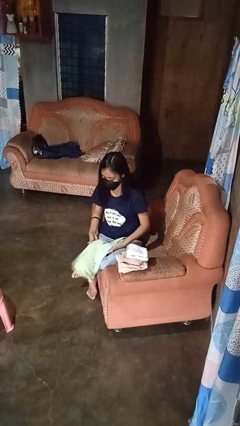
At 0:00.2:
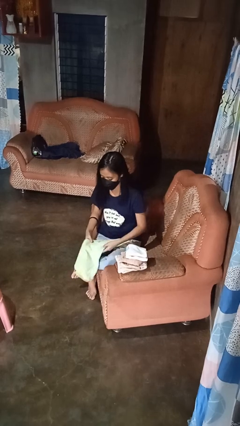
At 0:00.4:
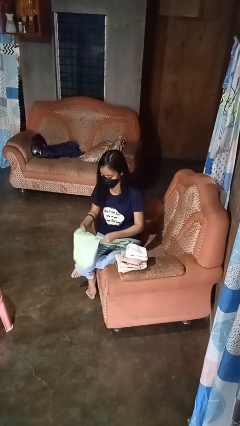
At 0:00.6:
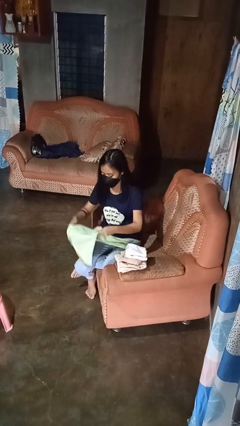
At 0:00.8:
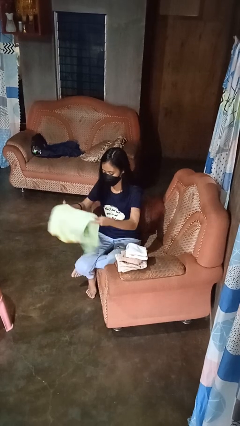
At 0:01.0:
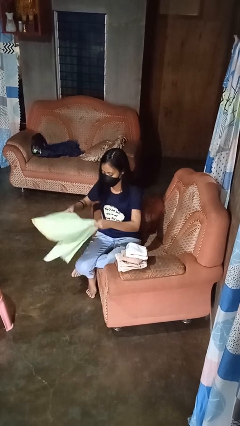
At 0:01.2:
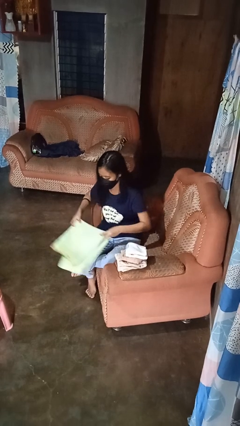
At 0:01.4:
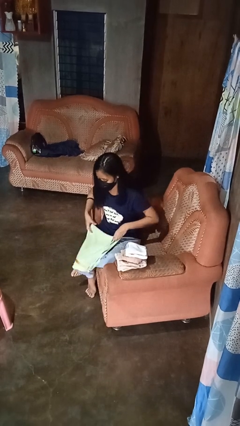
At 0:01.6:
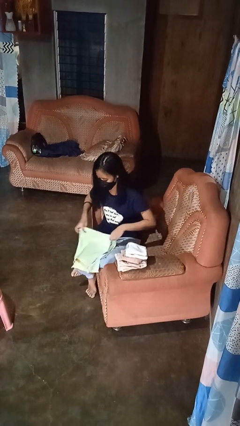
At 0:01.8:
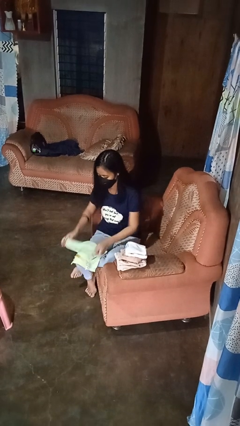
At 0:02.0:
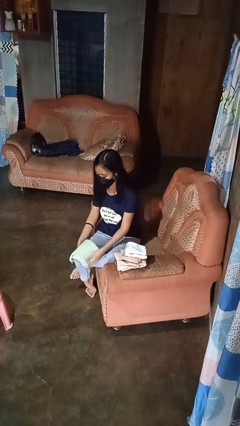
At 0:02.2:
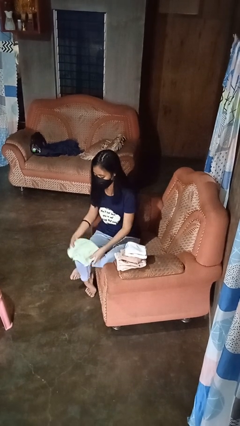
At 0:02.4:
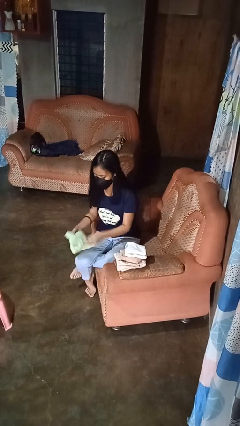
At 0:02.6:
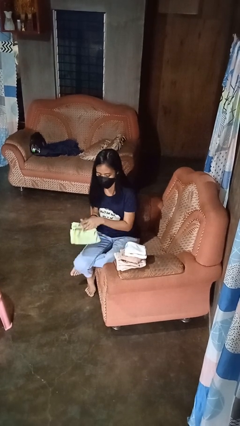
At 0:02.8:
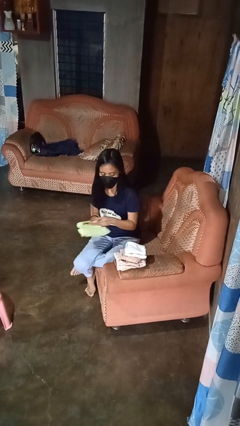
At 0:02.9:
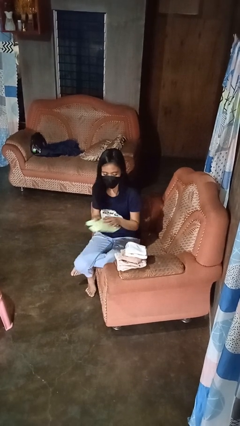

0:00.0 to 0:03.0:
person folds towel

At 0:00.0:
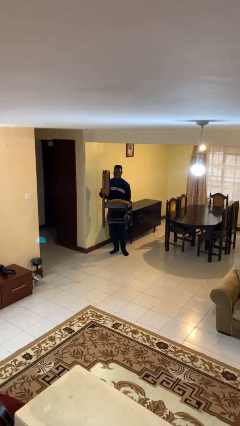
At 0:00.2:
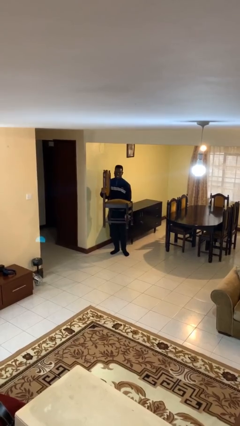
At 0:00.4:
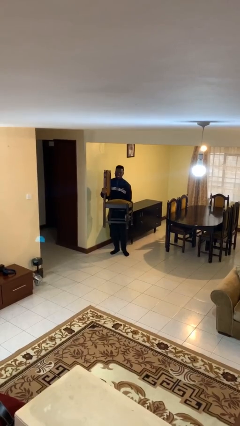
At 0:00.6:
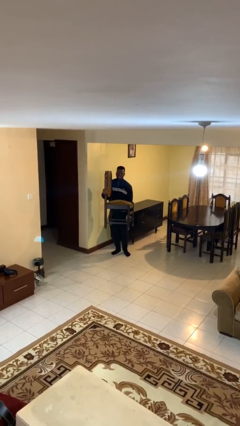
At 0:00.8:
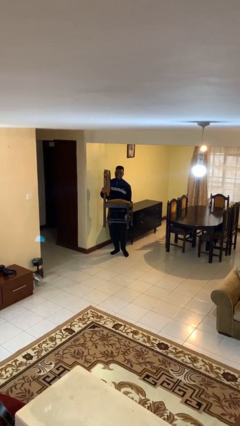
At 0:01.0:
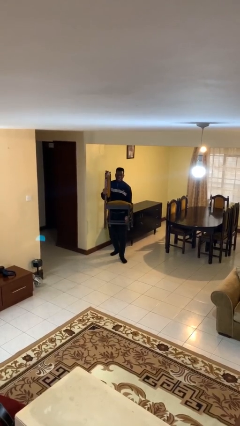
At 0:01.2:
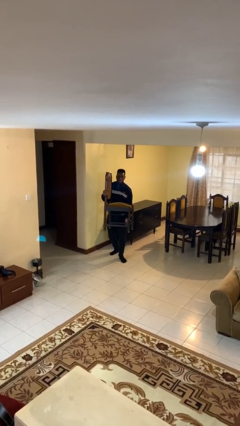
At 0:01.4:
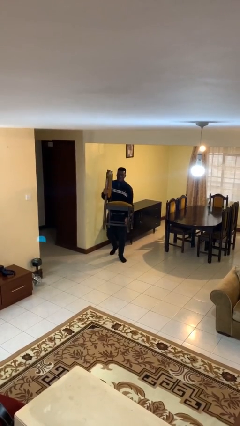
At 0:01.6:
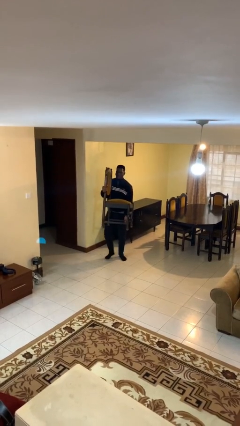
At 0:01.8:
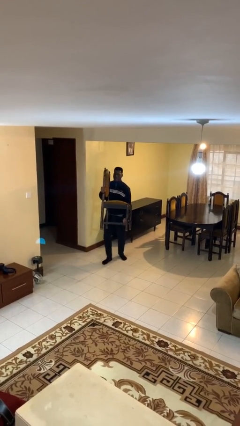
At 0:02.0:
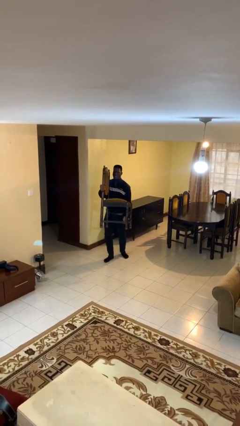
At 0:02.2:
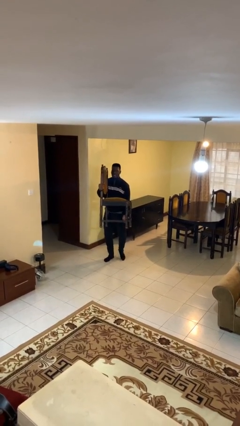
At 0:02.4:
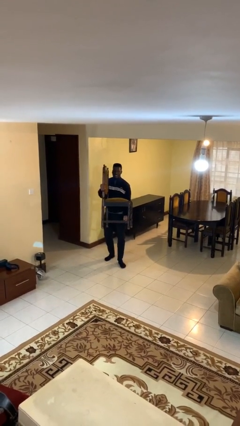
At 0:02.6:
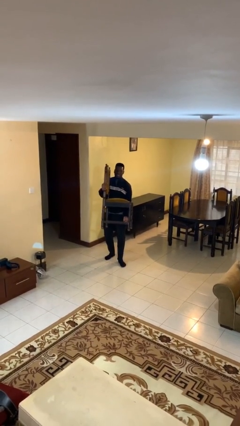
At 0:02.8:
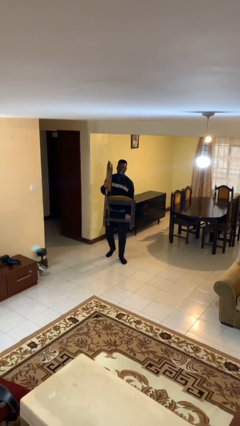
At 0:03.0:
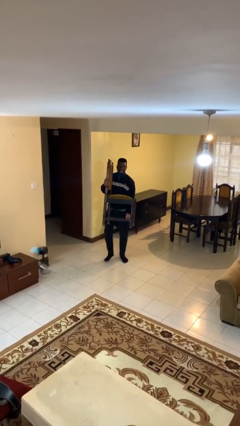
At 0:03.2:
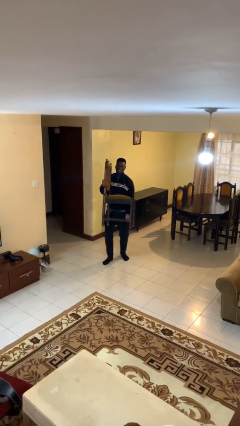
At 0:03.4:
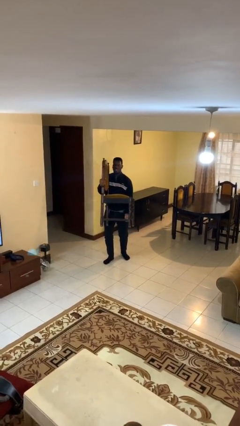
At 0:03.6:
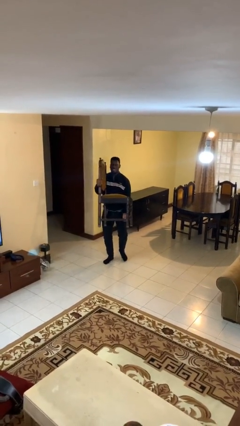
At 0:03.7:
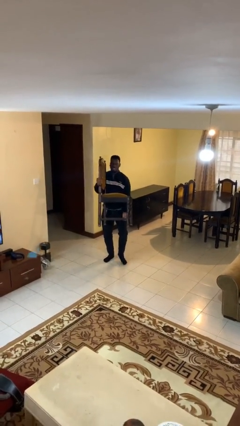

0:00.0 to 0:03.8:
person carries heavy object

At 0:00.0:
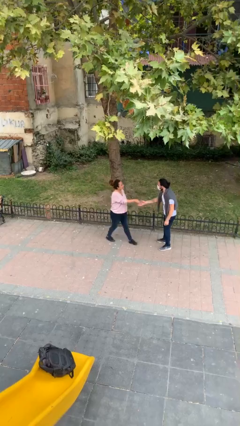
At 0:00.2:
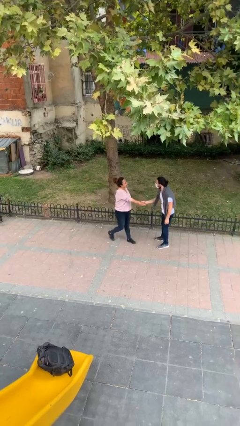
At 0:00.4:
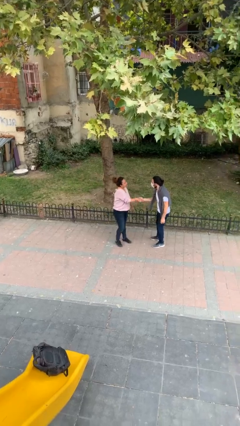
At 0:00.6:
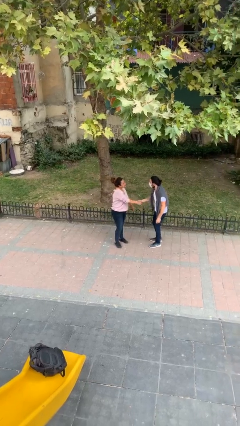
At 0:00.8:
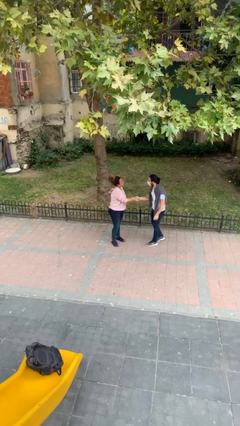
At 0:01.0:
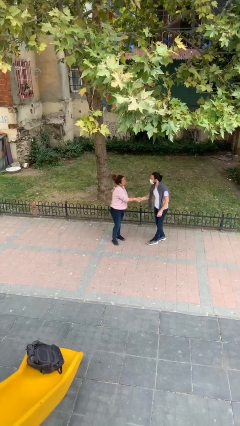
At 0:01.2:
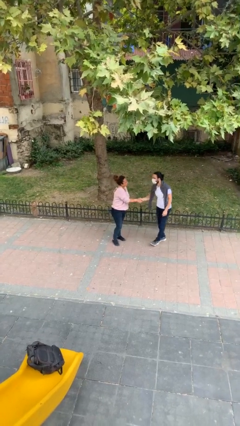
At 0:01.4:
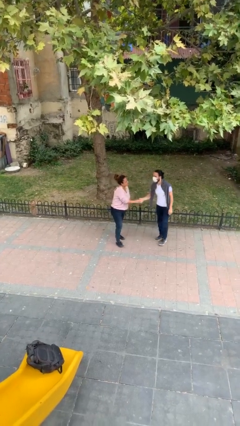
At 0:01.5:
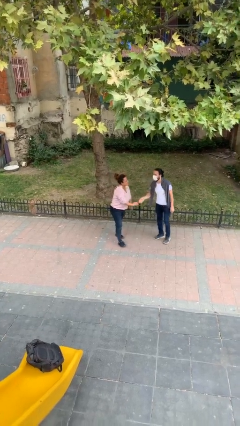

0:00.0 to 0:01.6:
person shakes hand

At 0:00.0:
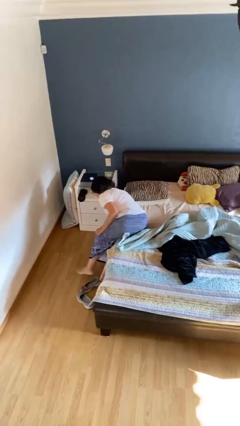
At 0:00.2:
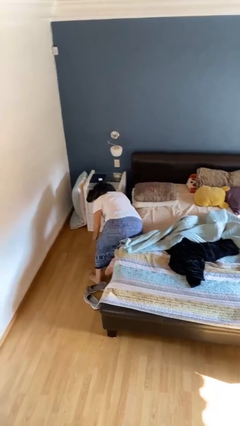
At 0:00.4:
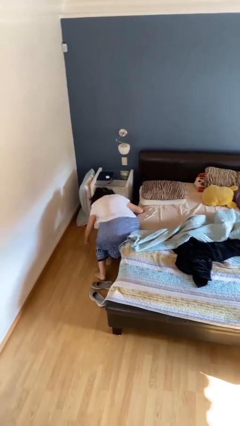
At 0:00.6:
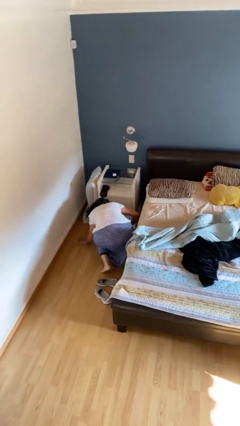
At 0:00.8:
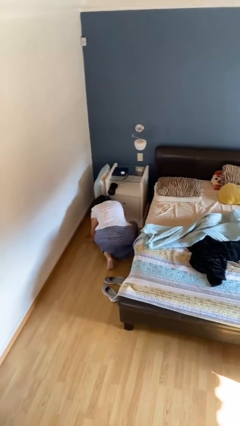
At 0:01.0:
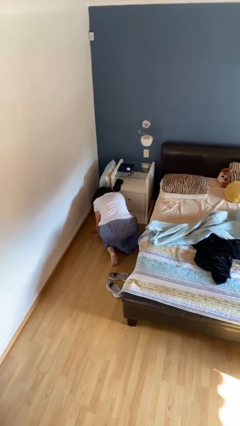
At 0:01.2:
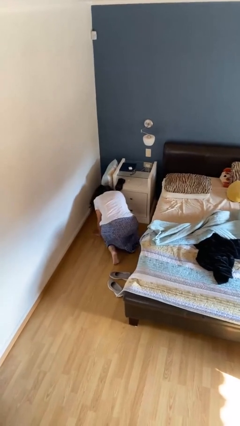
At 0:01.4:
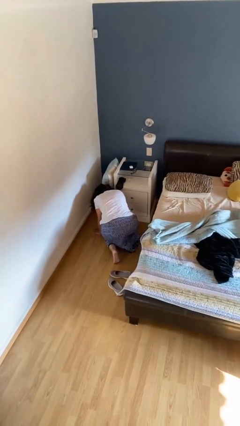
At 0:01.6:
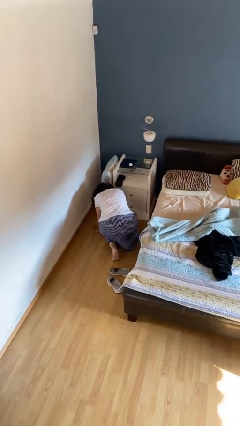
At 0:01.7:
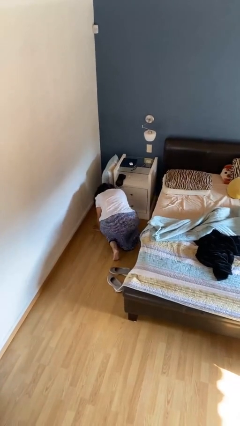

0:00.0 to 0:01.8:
person falls from bed

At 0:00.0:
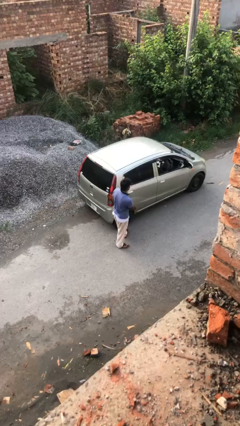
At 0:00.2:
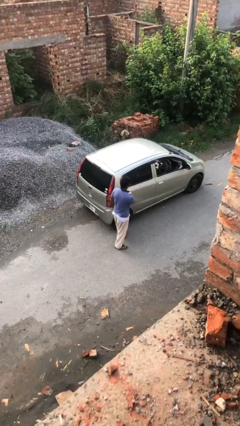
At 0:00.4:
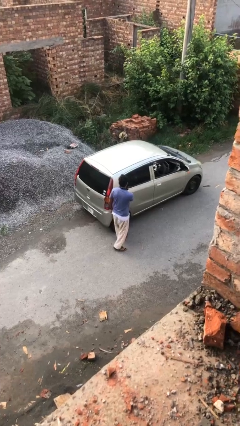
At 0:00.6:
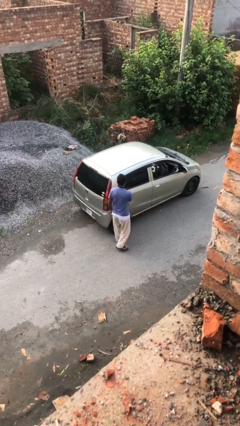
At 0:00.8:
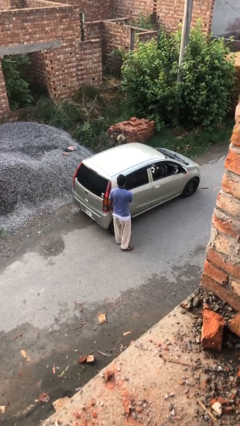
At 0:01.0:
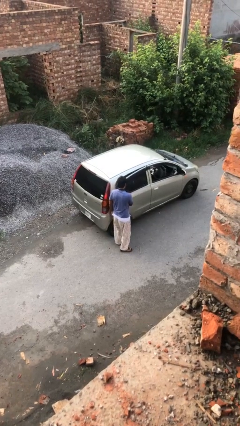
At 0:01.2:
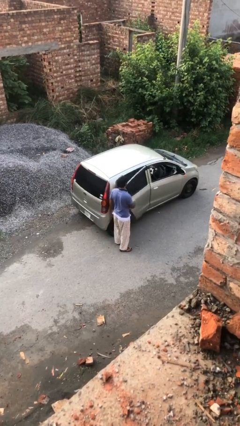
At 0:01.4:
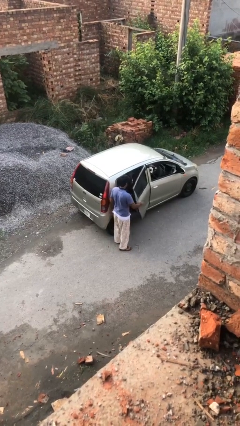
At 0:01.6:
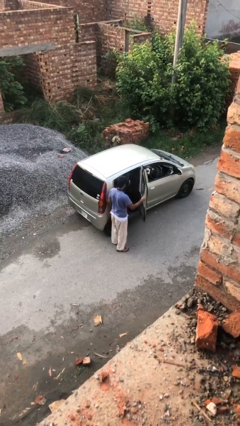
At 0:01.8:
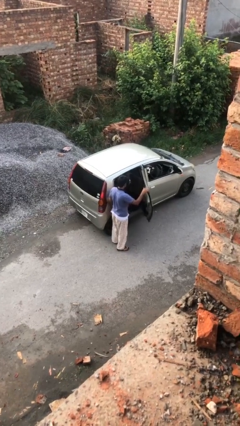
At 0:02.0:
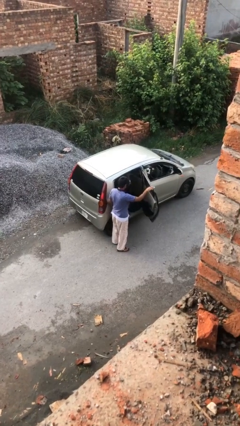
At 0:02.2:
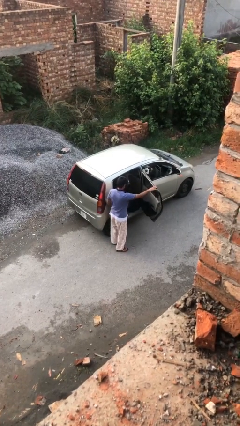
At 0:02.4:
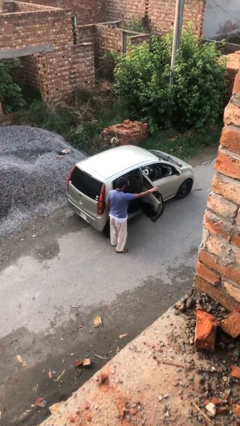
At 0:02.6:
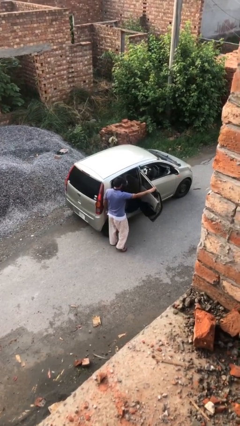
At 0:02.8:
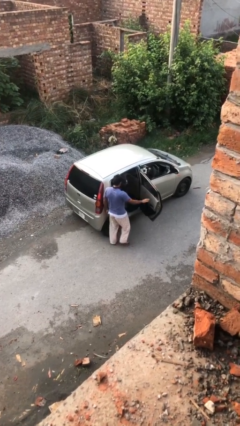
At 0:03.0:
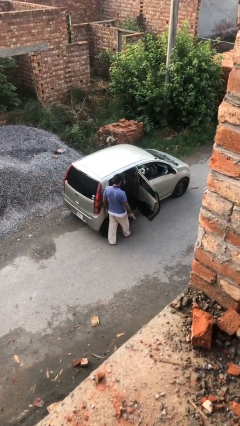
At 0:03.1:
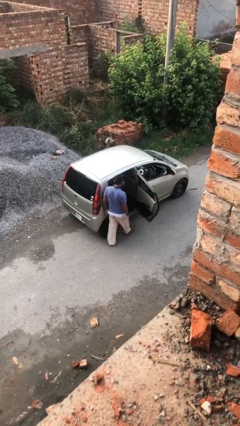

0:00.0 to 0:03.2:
person opens car door

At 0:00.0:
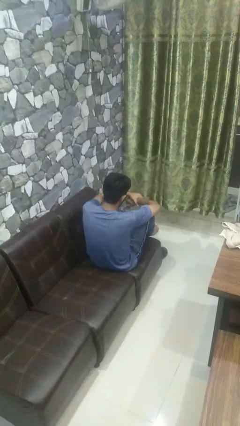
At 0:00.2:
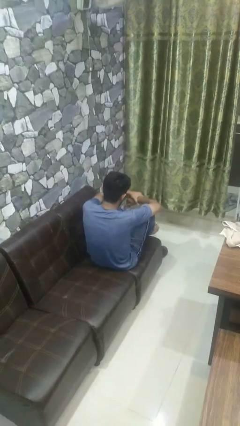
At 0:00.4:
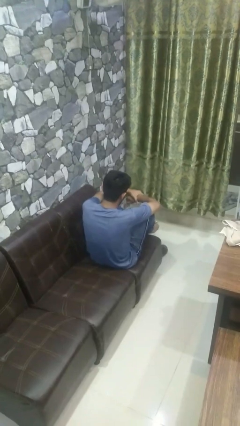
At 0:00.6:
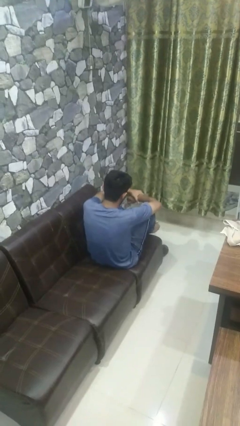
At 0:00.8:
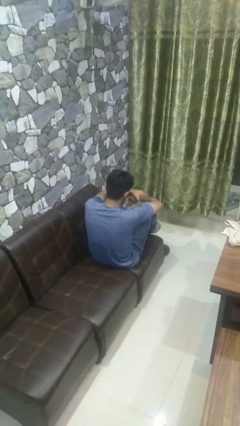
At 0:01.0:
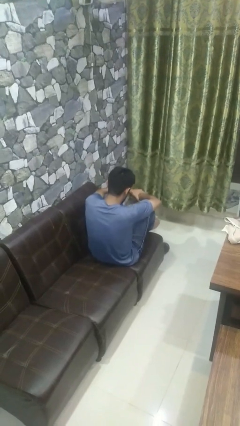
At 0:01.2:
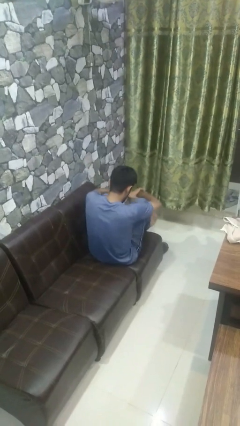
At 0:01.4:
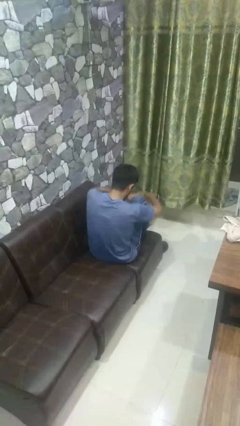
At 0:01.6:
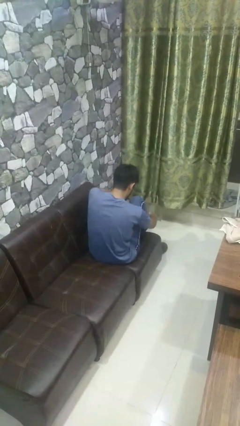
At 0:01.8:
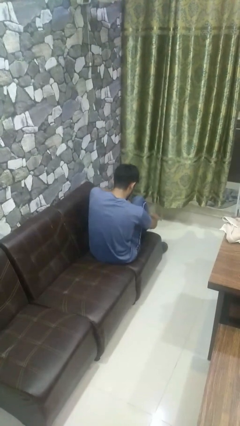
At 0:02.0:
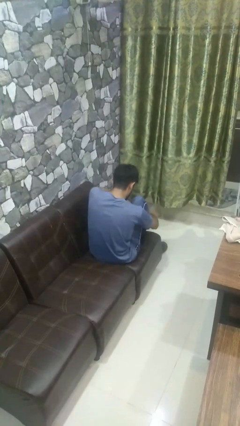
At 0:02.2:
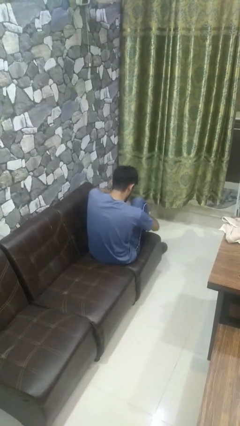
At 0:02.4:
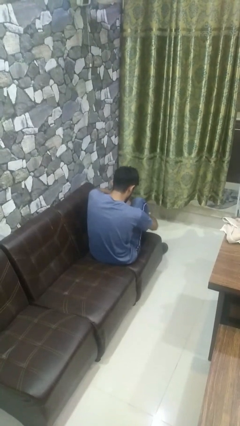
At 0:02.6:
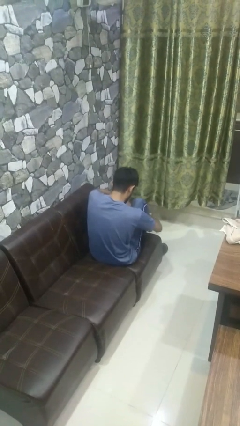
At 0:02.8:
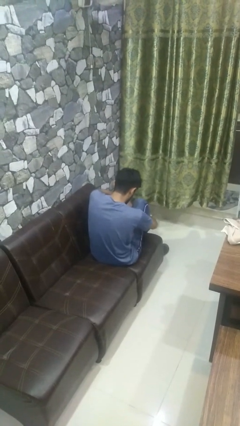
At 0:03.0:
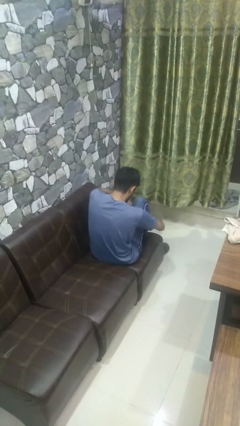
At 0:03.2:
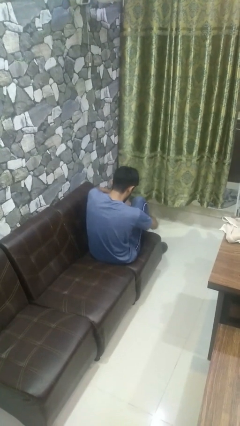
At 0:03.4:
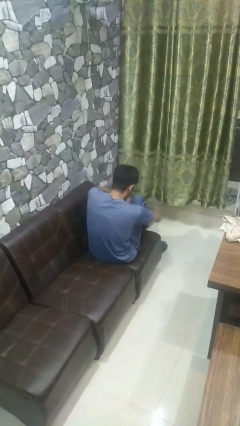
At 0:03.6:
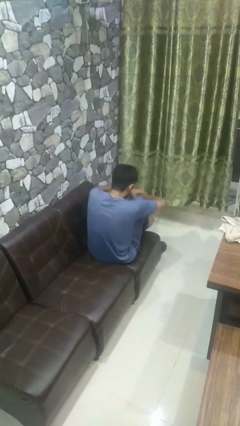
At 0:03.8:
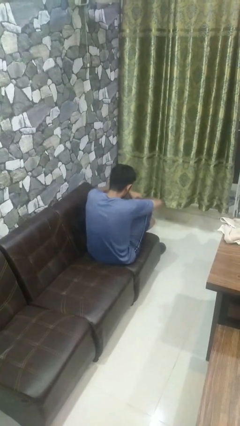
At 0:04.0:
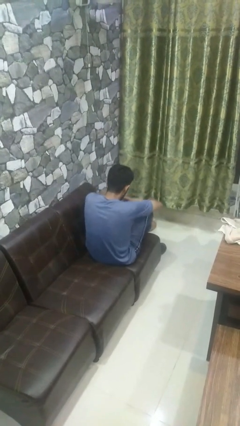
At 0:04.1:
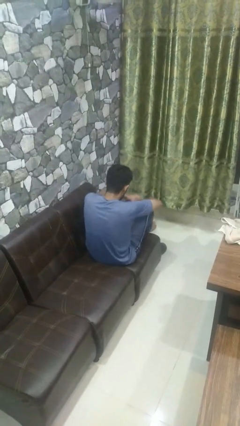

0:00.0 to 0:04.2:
person rubs foot
